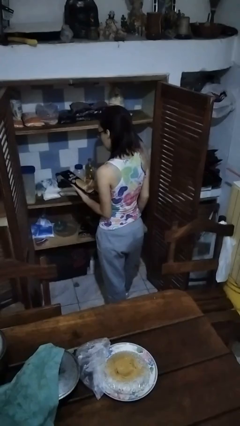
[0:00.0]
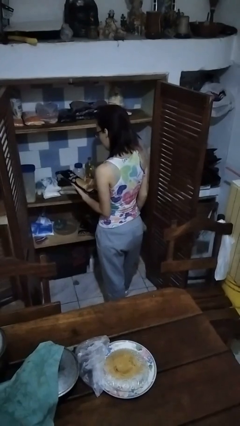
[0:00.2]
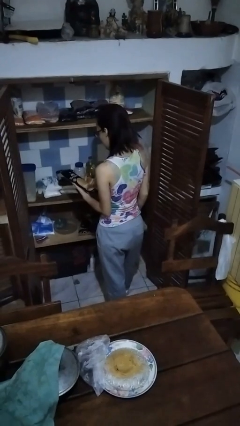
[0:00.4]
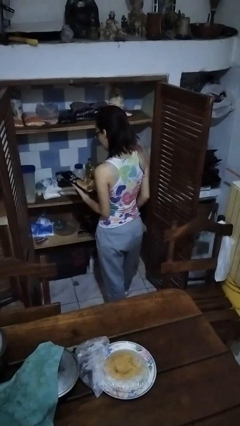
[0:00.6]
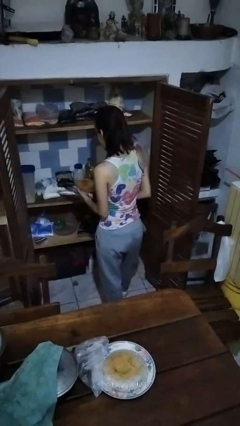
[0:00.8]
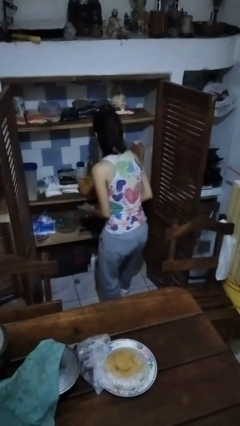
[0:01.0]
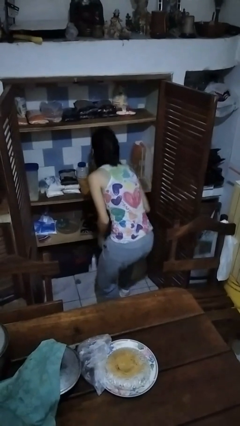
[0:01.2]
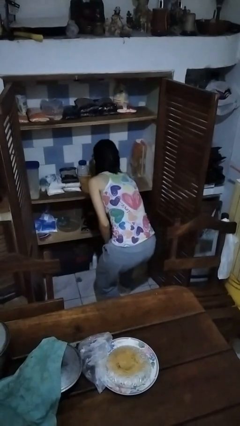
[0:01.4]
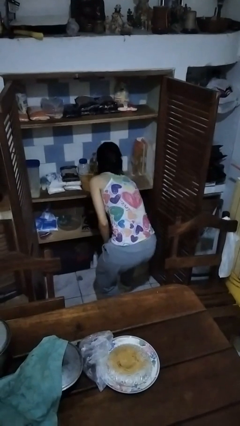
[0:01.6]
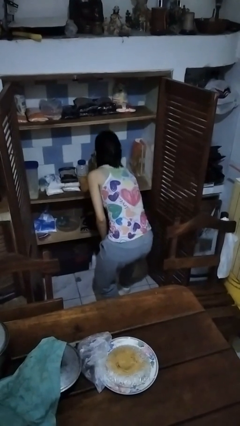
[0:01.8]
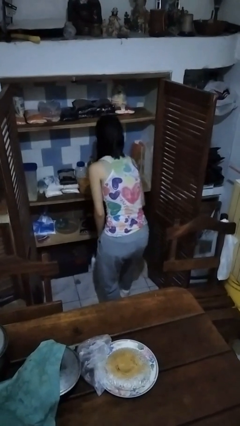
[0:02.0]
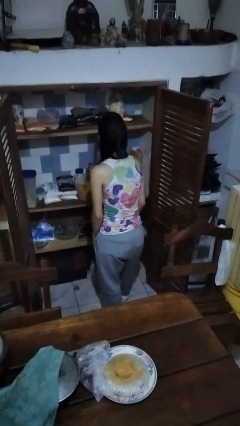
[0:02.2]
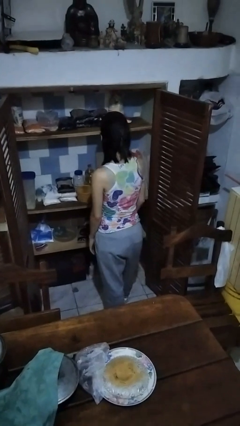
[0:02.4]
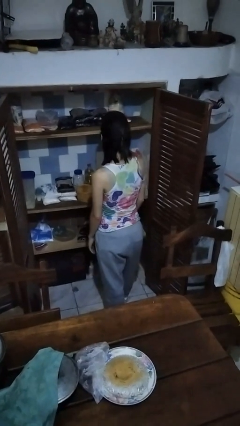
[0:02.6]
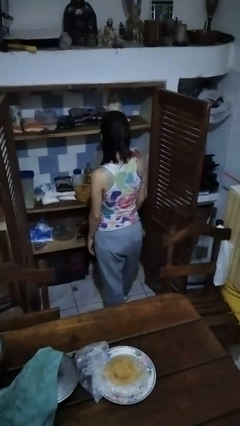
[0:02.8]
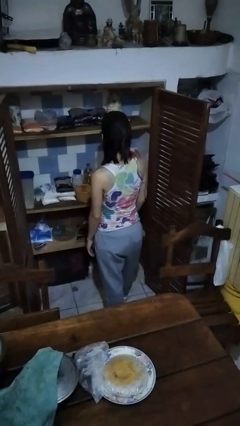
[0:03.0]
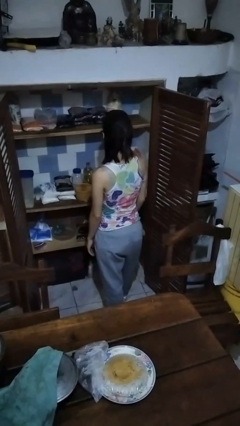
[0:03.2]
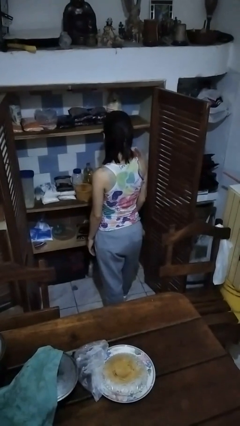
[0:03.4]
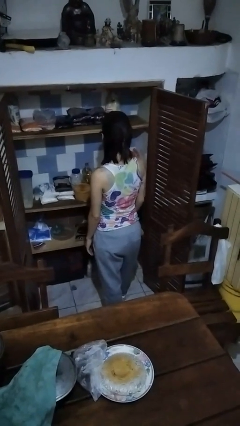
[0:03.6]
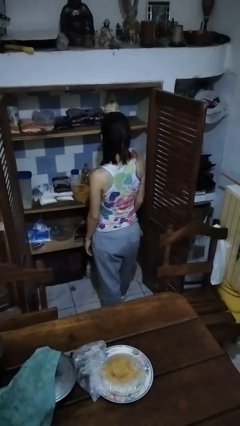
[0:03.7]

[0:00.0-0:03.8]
person puts object in cabinet

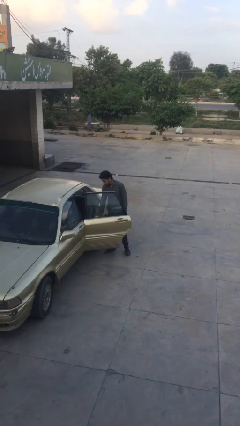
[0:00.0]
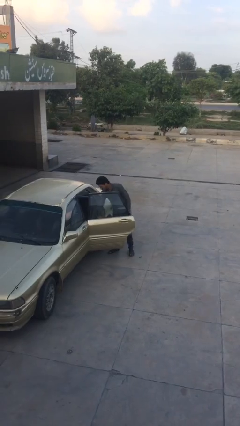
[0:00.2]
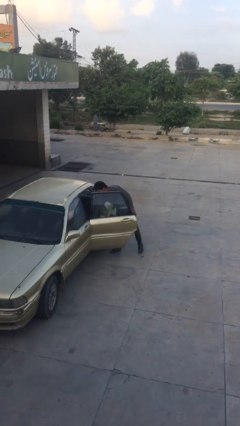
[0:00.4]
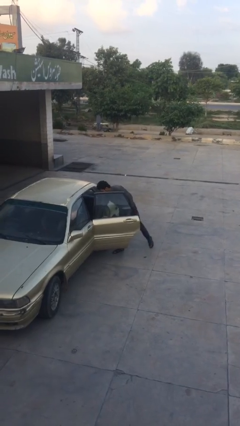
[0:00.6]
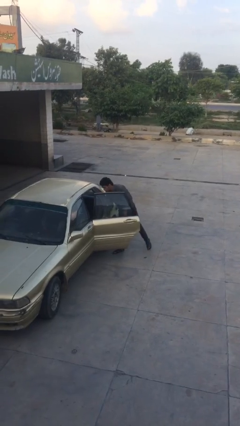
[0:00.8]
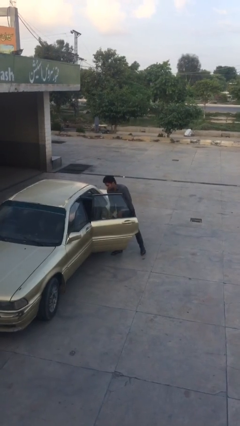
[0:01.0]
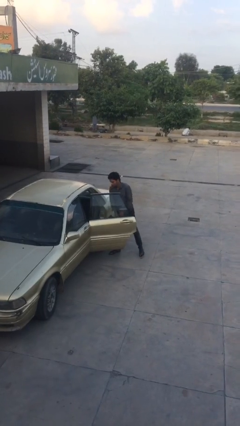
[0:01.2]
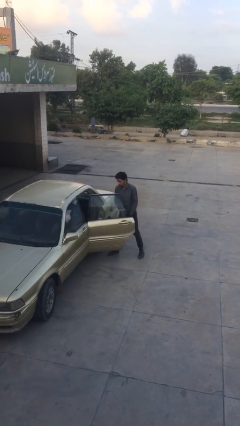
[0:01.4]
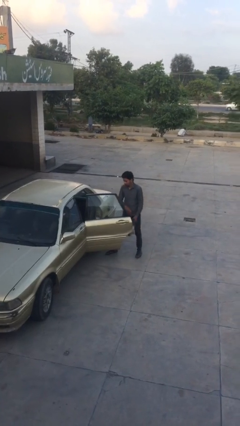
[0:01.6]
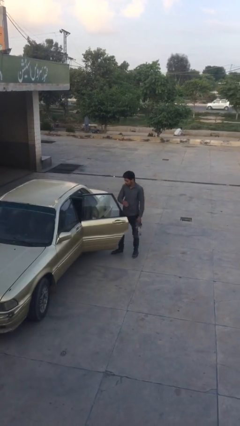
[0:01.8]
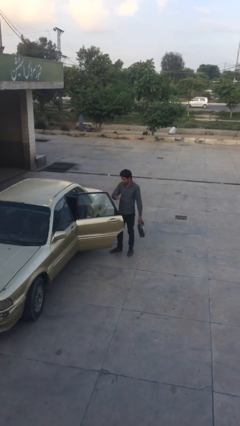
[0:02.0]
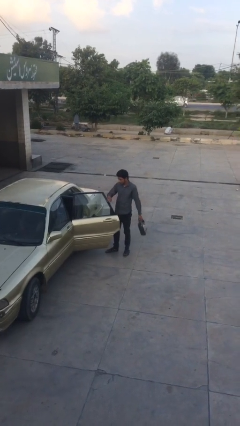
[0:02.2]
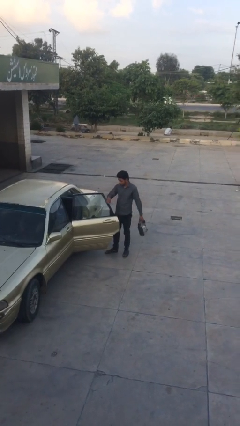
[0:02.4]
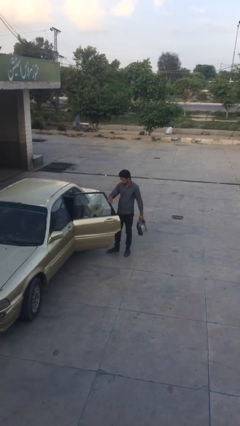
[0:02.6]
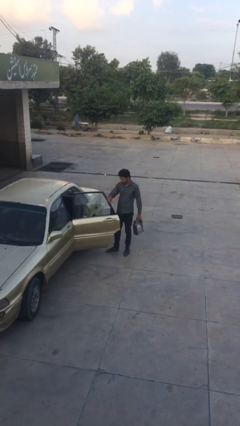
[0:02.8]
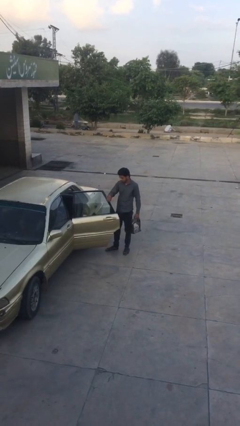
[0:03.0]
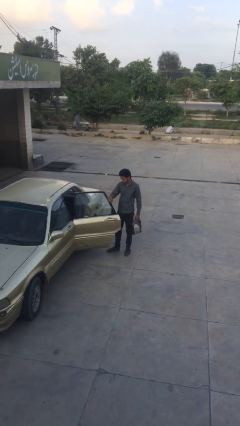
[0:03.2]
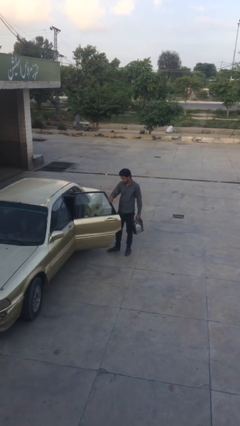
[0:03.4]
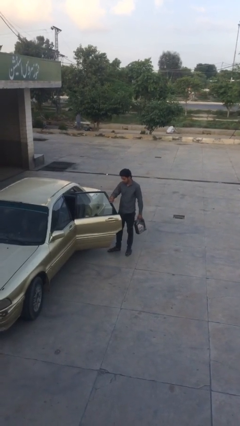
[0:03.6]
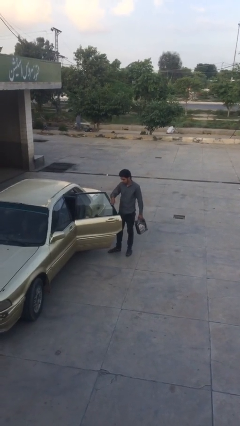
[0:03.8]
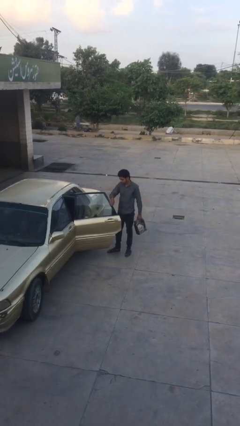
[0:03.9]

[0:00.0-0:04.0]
person unloads car

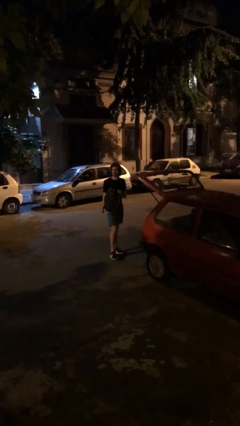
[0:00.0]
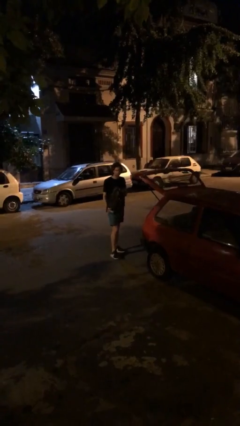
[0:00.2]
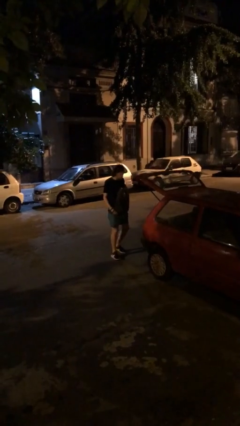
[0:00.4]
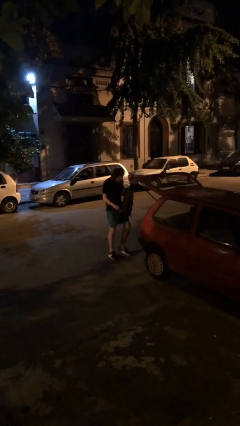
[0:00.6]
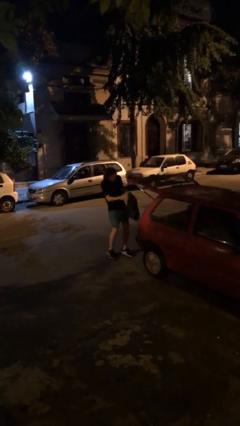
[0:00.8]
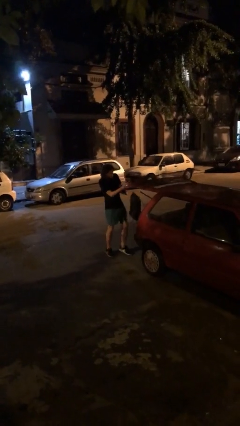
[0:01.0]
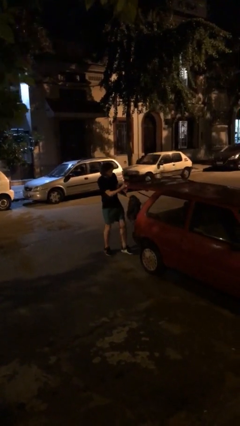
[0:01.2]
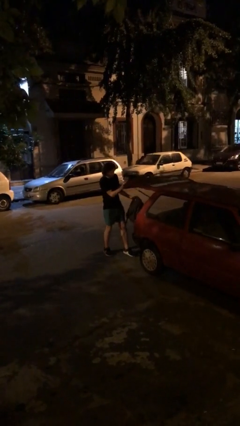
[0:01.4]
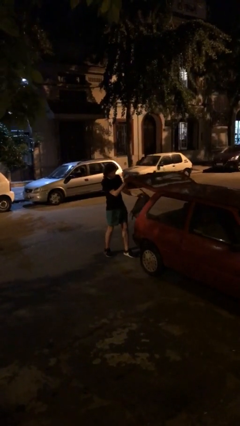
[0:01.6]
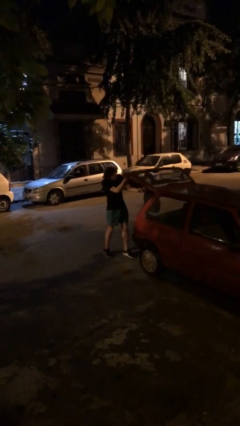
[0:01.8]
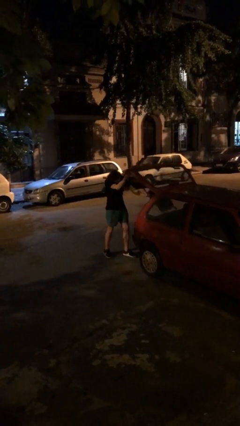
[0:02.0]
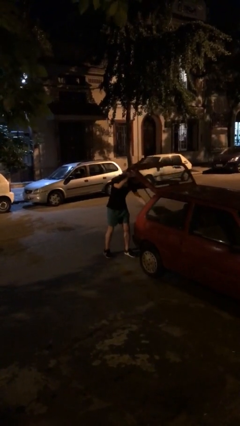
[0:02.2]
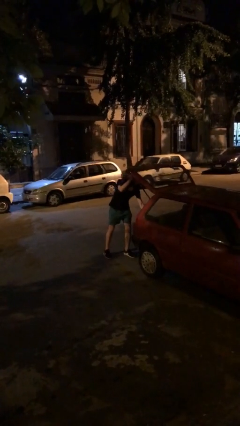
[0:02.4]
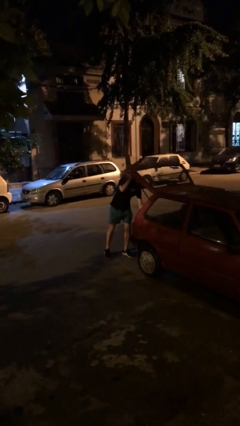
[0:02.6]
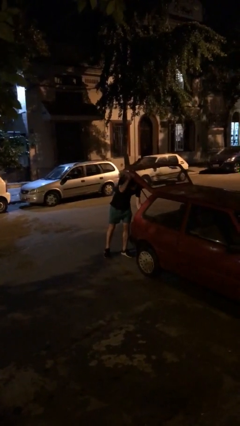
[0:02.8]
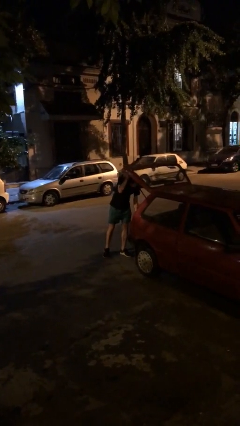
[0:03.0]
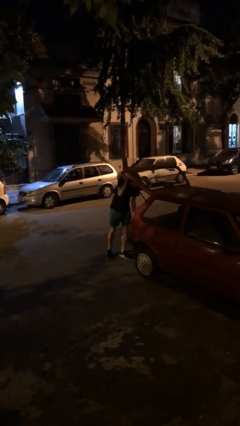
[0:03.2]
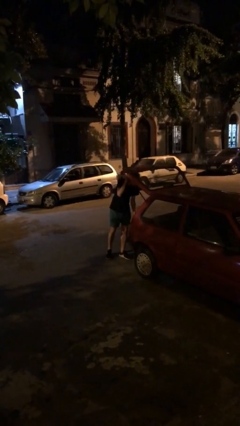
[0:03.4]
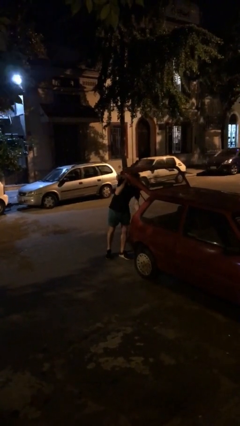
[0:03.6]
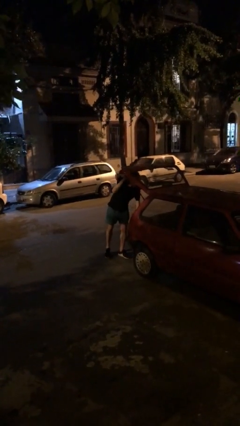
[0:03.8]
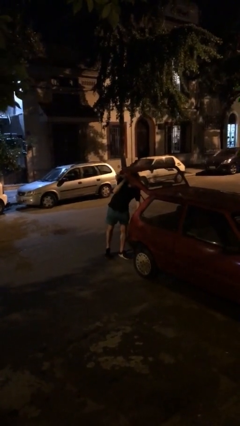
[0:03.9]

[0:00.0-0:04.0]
person loads car

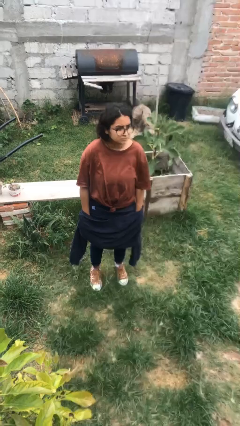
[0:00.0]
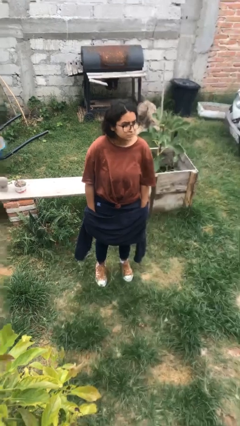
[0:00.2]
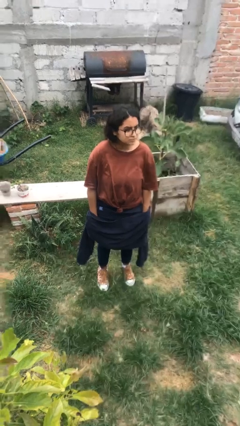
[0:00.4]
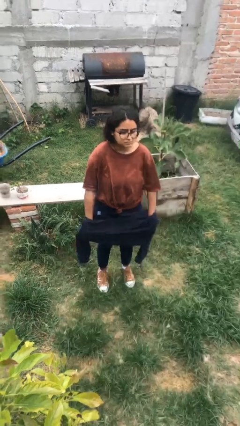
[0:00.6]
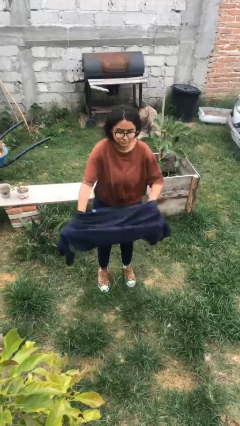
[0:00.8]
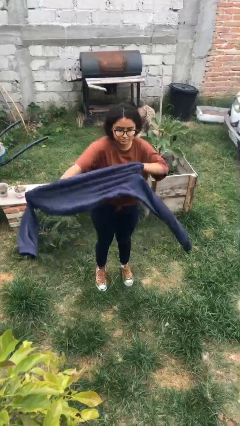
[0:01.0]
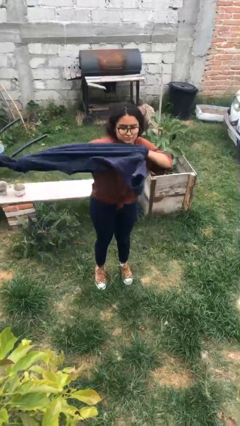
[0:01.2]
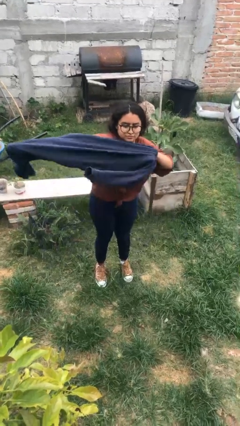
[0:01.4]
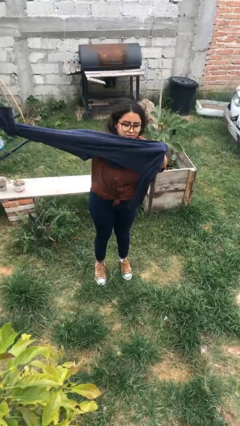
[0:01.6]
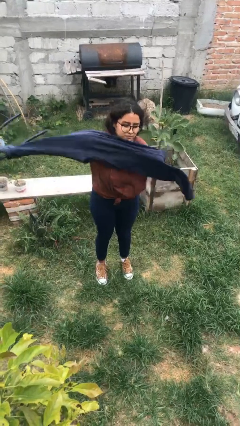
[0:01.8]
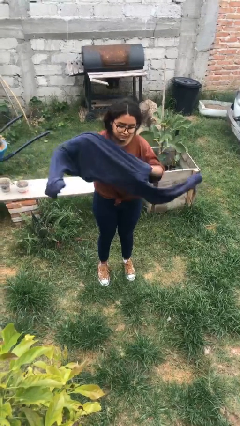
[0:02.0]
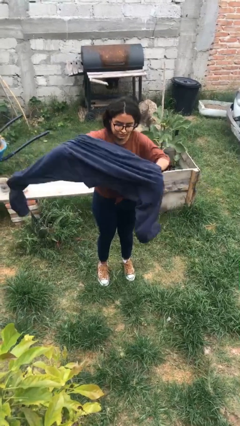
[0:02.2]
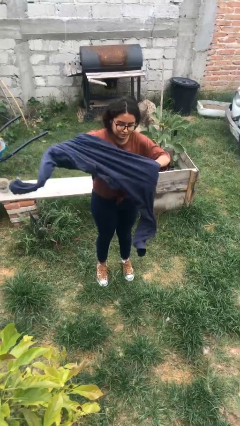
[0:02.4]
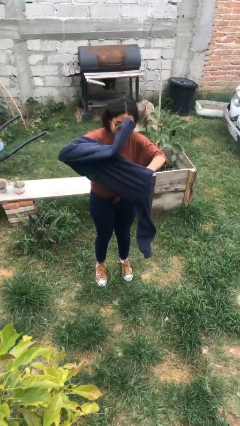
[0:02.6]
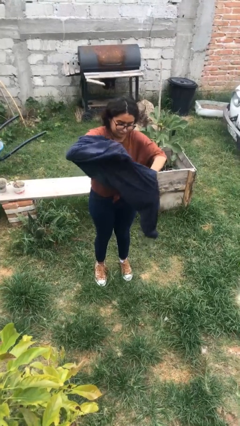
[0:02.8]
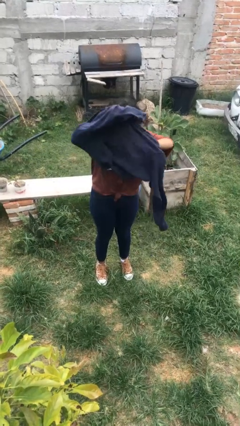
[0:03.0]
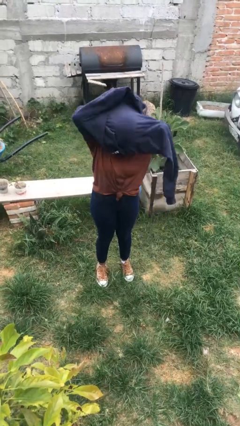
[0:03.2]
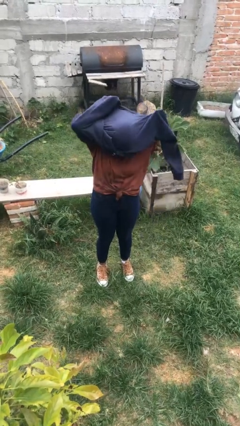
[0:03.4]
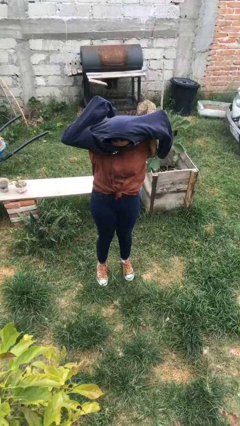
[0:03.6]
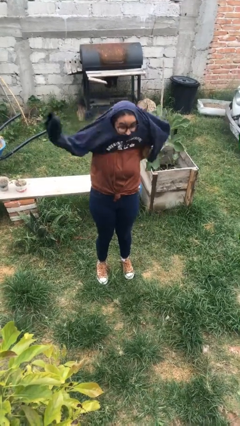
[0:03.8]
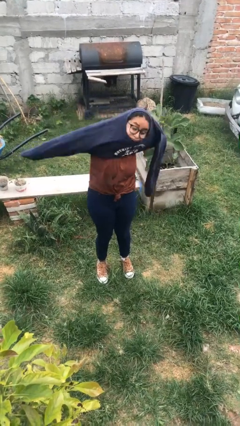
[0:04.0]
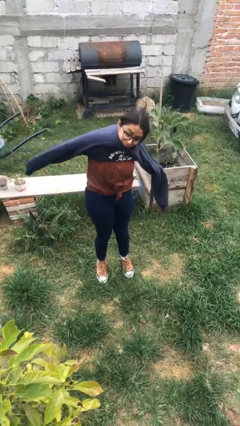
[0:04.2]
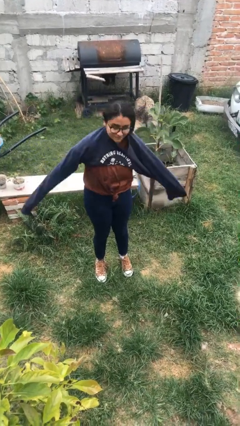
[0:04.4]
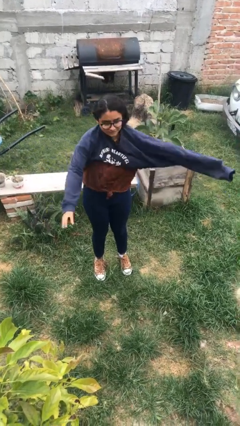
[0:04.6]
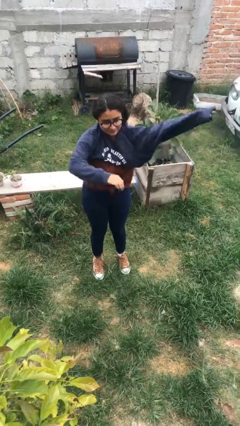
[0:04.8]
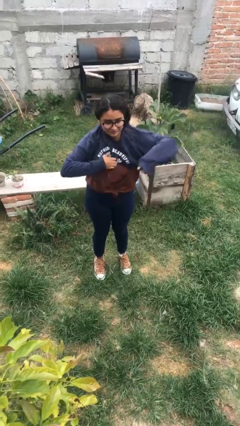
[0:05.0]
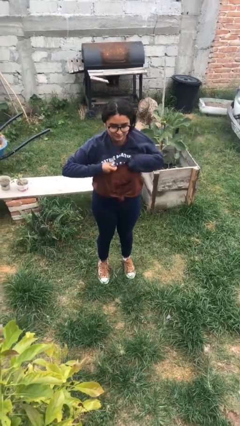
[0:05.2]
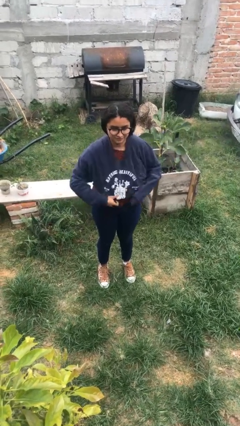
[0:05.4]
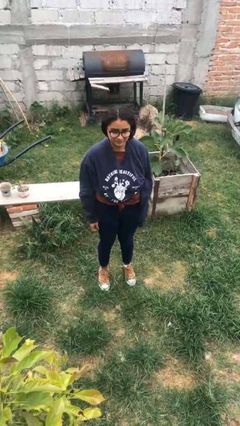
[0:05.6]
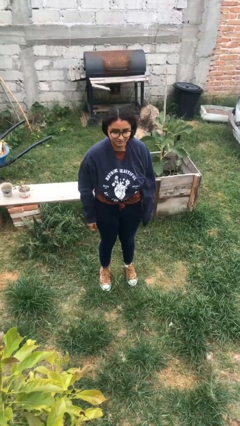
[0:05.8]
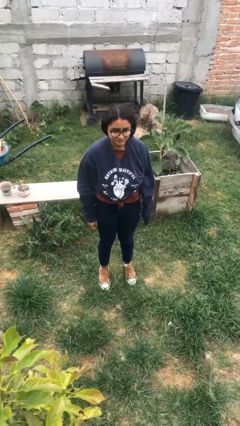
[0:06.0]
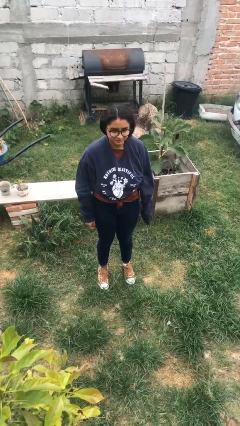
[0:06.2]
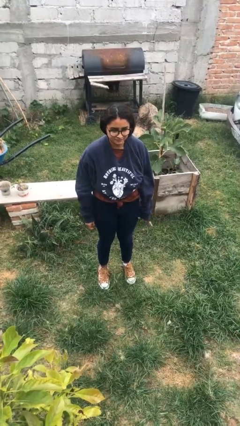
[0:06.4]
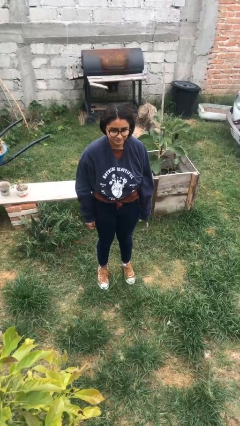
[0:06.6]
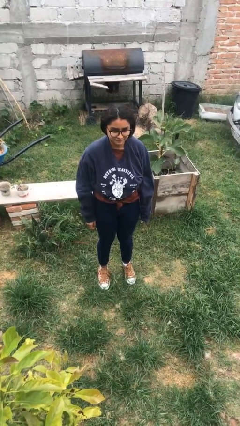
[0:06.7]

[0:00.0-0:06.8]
person puts on shirt
